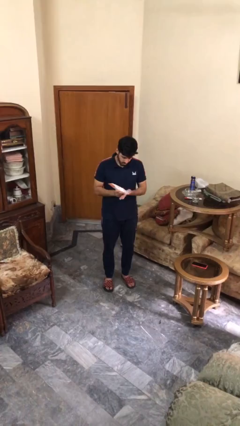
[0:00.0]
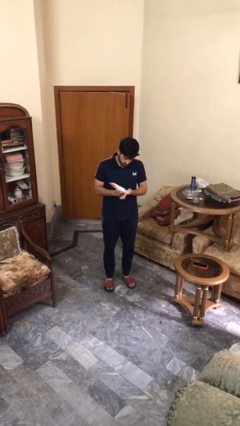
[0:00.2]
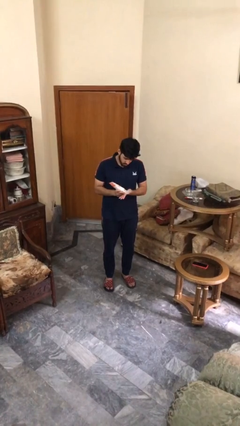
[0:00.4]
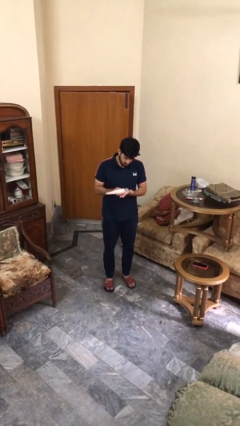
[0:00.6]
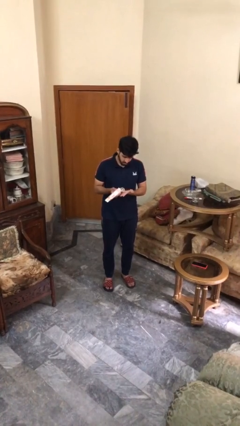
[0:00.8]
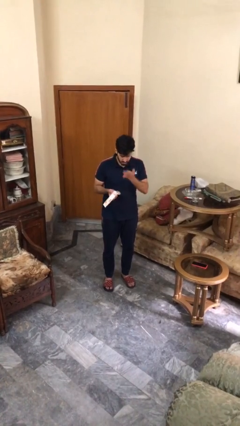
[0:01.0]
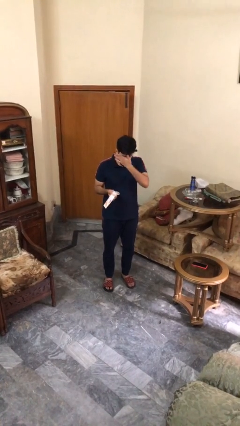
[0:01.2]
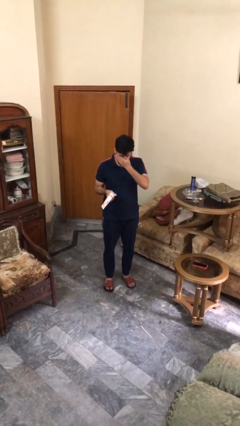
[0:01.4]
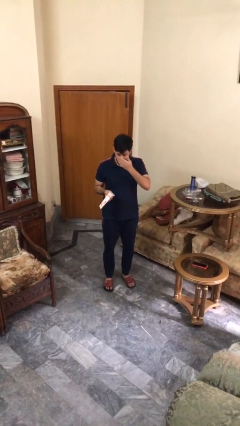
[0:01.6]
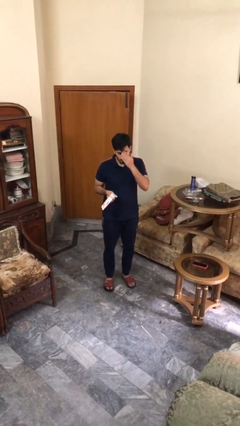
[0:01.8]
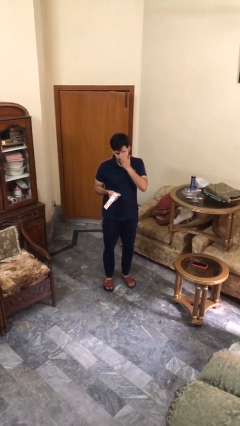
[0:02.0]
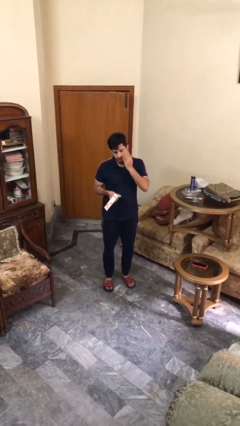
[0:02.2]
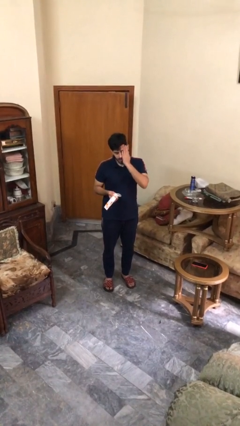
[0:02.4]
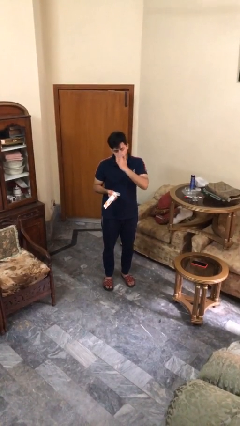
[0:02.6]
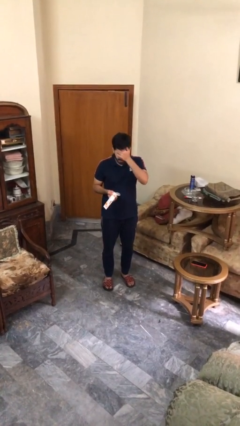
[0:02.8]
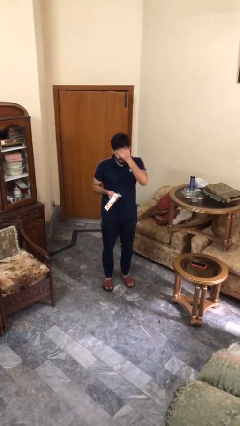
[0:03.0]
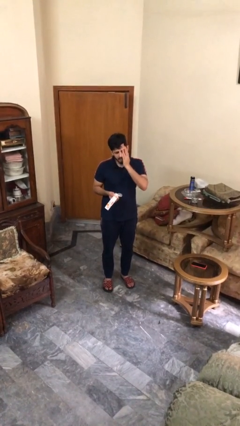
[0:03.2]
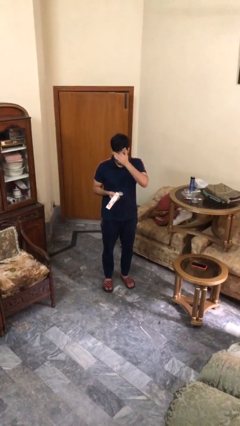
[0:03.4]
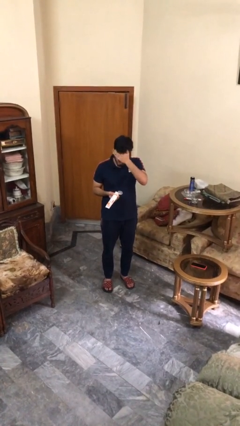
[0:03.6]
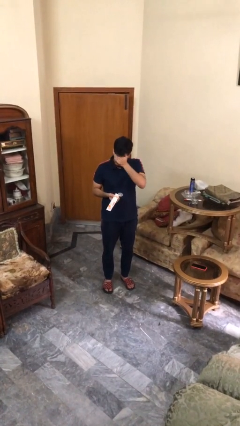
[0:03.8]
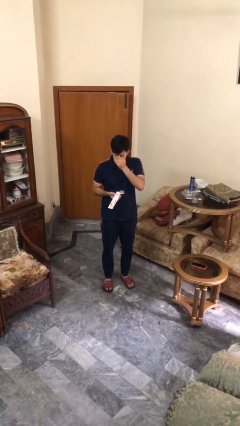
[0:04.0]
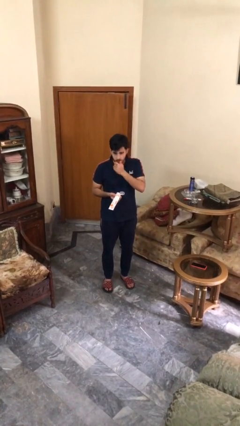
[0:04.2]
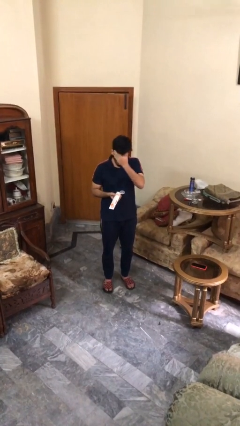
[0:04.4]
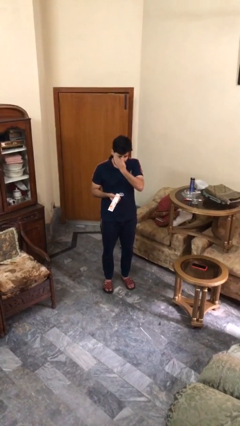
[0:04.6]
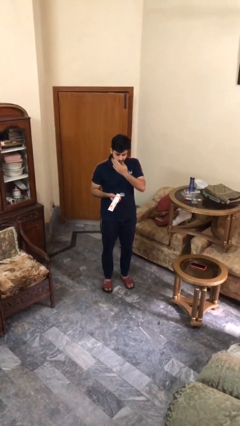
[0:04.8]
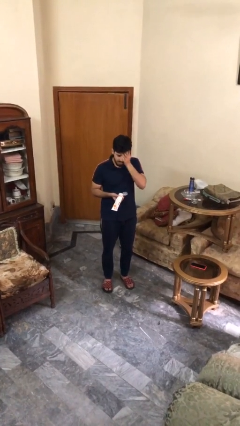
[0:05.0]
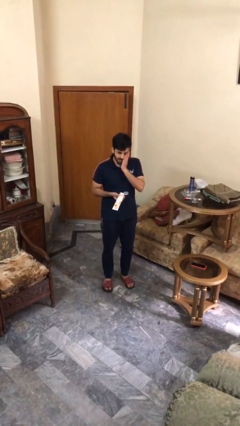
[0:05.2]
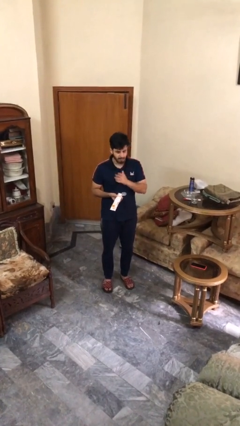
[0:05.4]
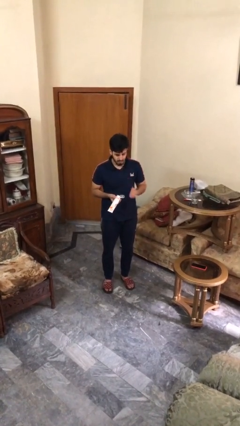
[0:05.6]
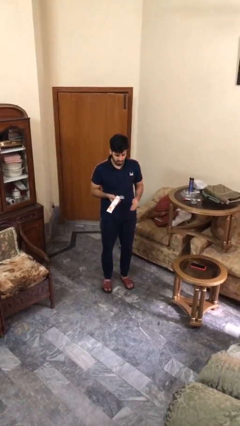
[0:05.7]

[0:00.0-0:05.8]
person applies sunscreen

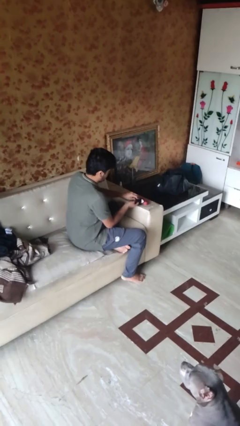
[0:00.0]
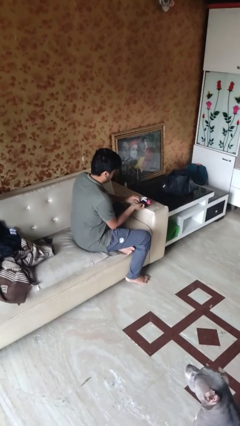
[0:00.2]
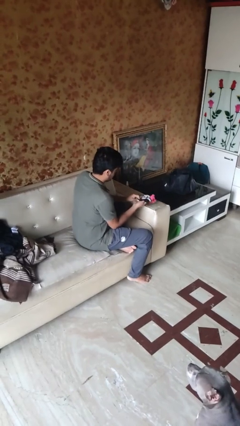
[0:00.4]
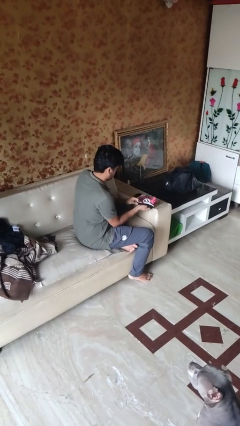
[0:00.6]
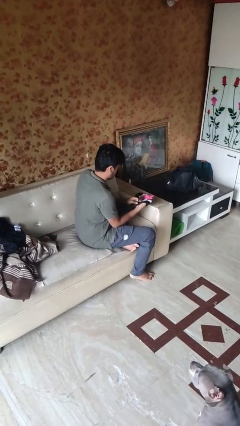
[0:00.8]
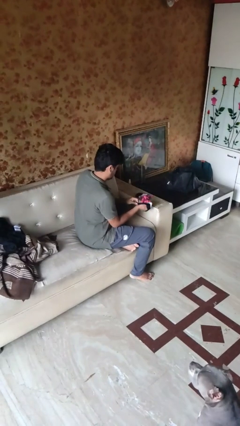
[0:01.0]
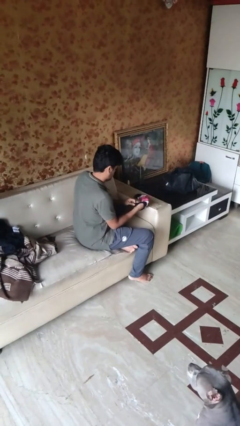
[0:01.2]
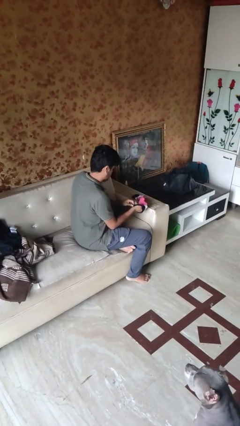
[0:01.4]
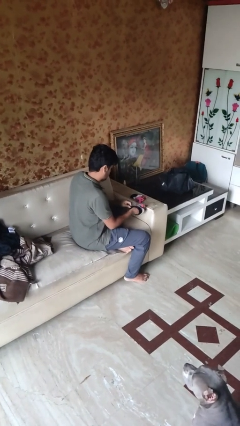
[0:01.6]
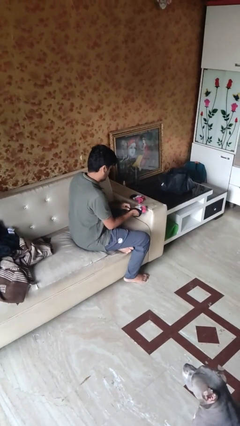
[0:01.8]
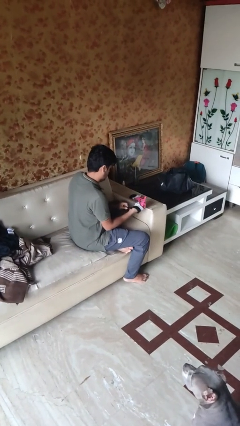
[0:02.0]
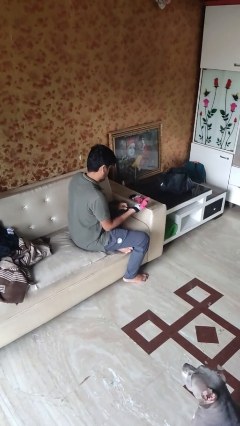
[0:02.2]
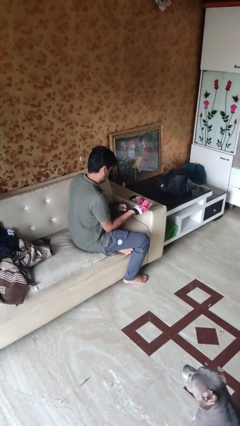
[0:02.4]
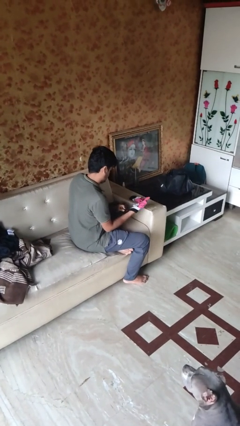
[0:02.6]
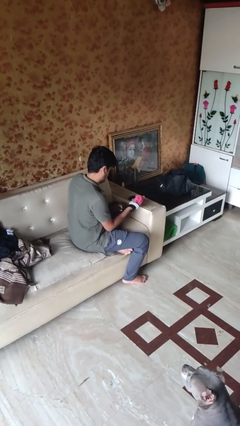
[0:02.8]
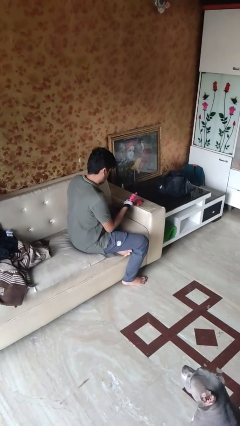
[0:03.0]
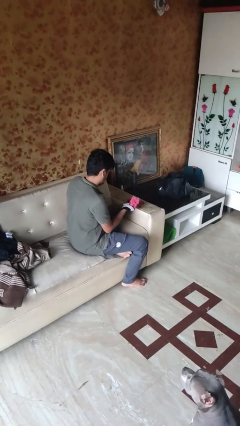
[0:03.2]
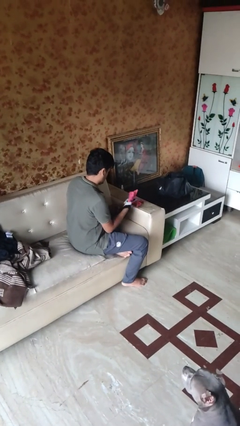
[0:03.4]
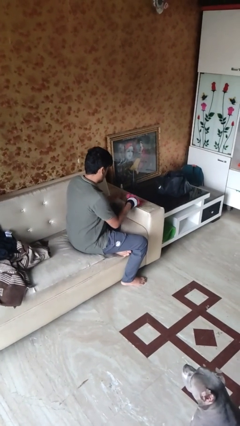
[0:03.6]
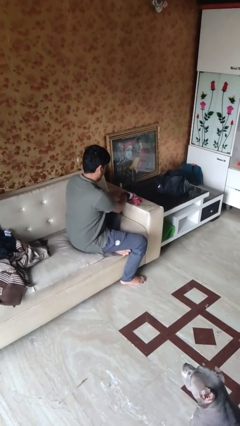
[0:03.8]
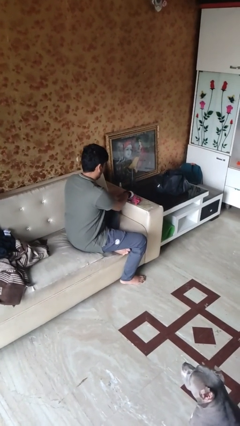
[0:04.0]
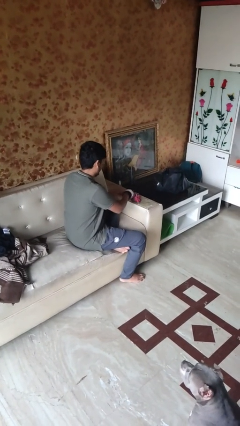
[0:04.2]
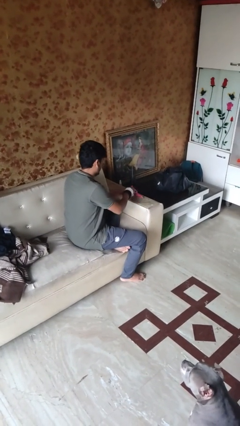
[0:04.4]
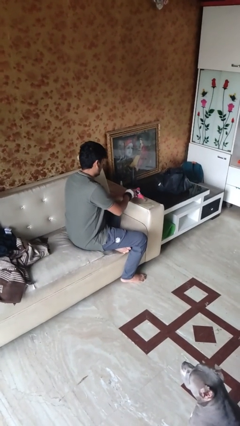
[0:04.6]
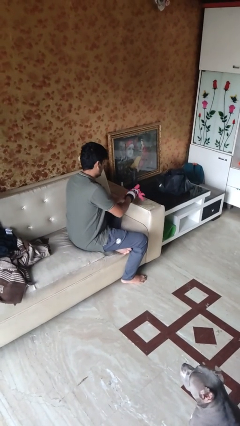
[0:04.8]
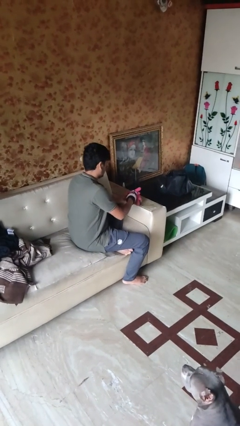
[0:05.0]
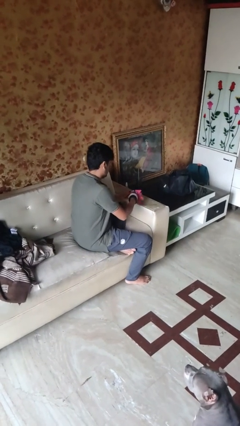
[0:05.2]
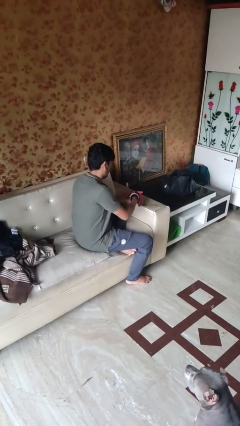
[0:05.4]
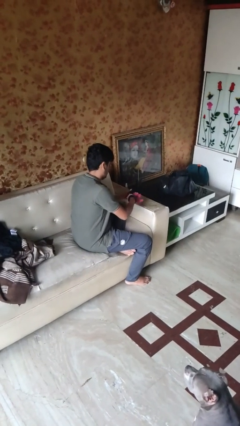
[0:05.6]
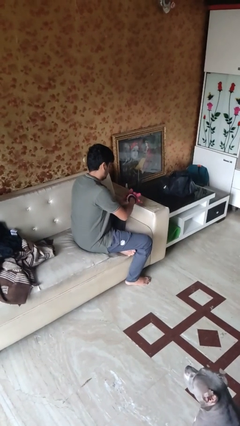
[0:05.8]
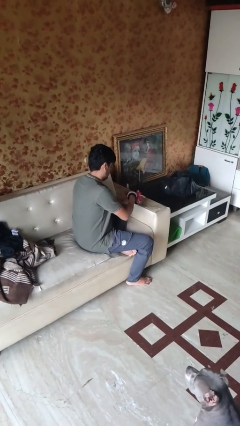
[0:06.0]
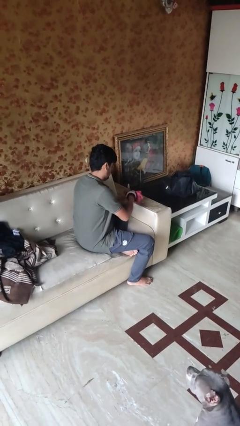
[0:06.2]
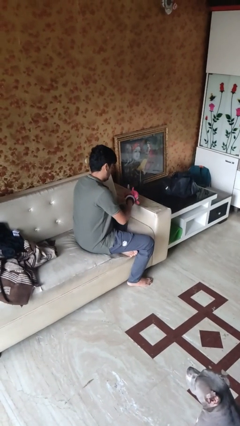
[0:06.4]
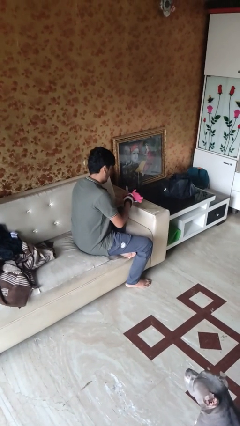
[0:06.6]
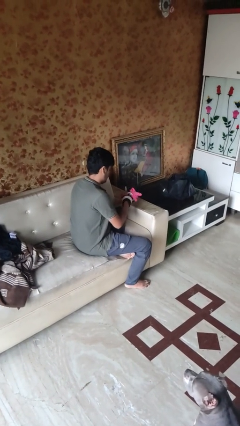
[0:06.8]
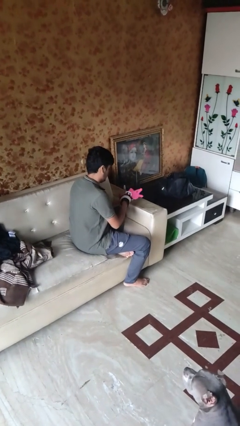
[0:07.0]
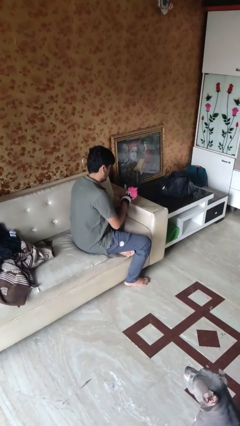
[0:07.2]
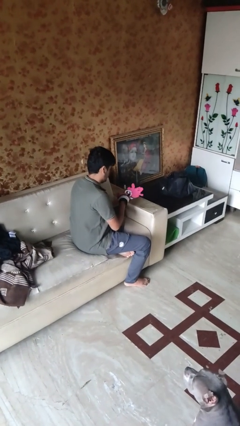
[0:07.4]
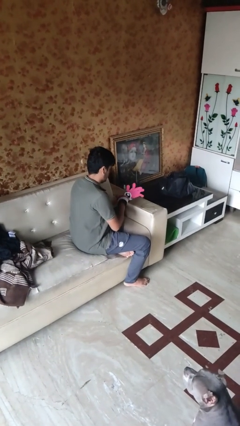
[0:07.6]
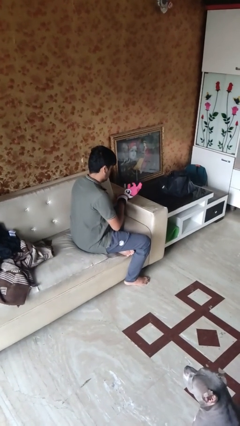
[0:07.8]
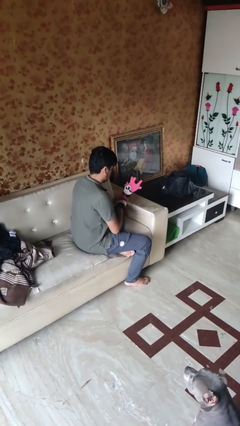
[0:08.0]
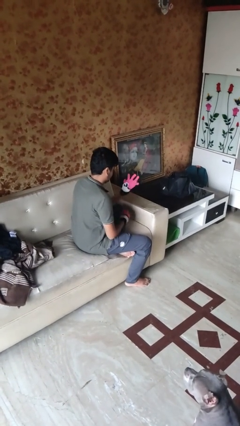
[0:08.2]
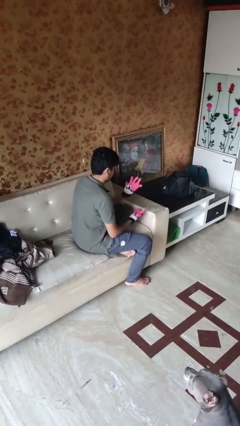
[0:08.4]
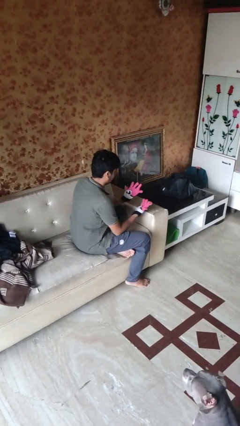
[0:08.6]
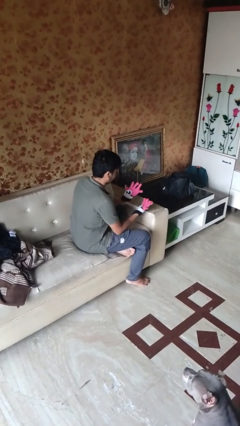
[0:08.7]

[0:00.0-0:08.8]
person puts on gloves

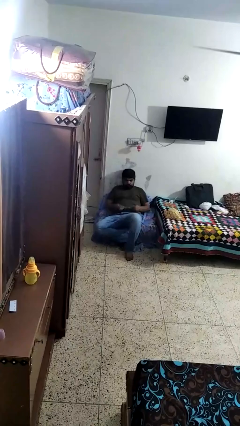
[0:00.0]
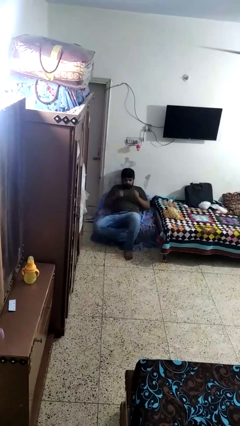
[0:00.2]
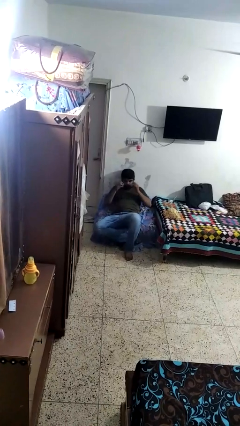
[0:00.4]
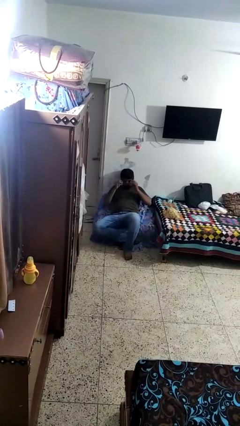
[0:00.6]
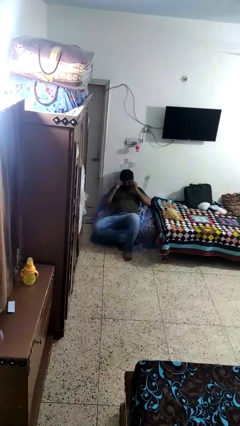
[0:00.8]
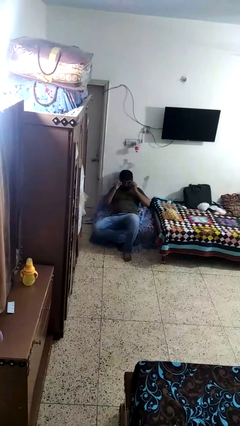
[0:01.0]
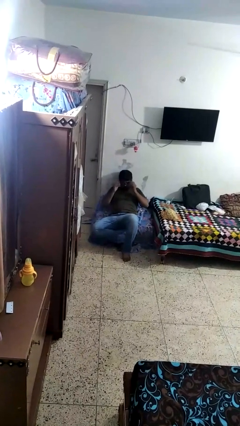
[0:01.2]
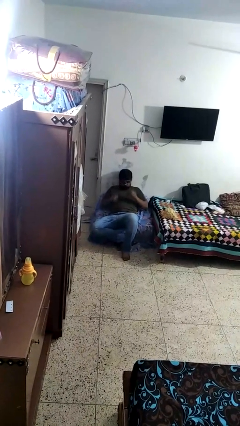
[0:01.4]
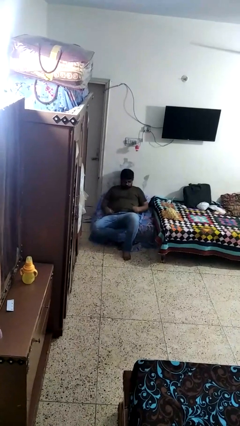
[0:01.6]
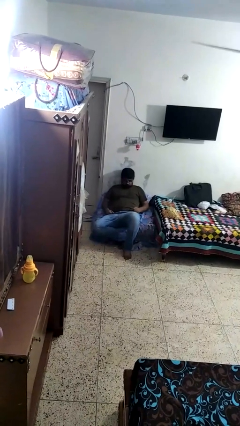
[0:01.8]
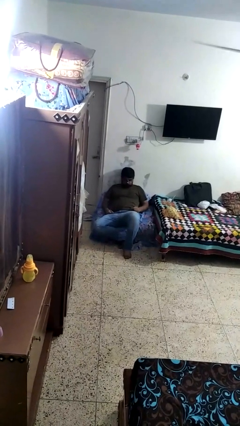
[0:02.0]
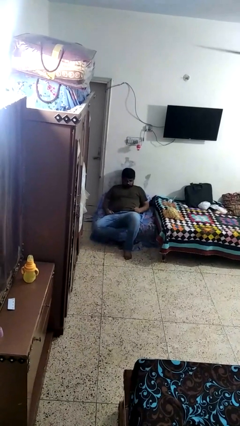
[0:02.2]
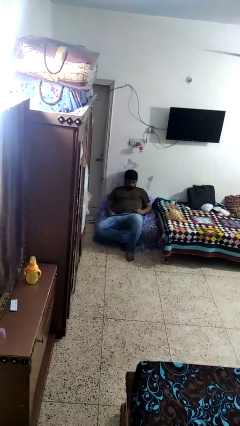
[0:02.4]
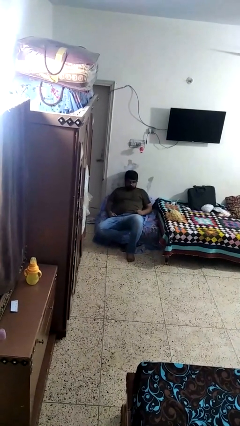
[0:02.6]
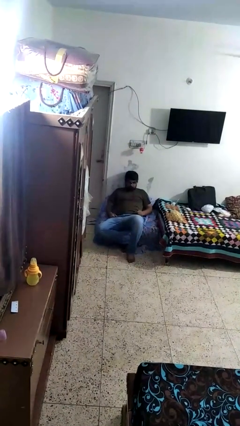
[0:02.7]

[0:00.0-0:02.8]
person puts on glasses

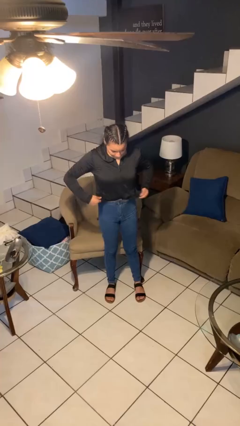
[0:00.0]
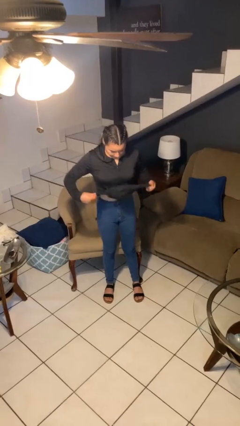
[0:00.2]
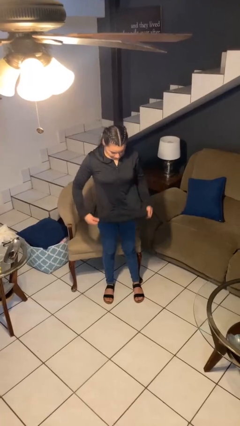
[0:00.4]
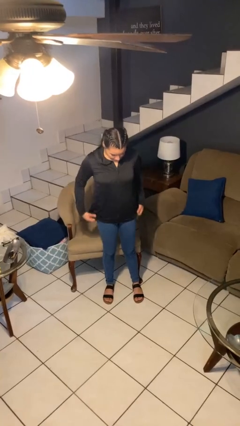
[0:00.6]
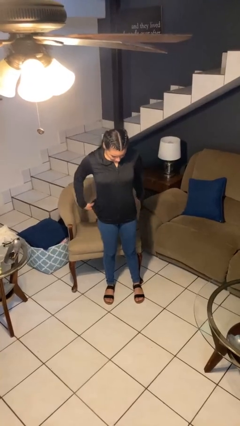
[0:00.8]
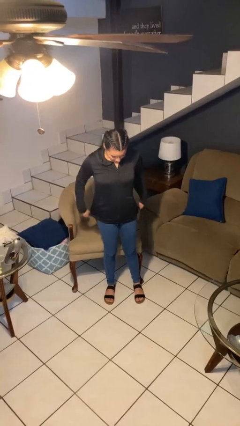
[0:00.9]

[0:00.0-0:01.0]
person untucks shirt
